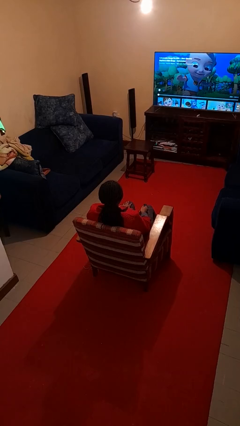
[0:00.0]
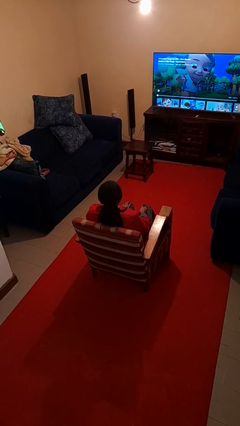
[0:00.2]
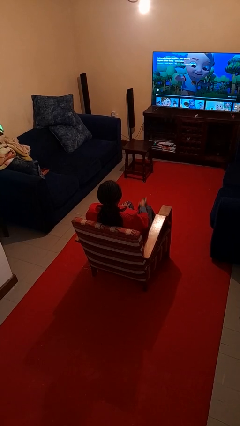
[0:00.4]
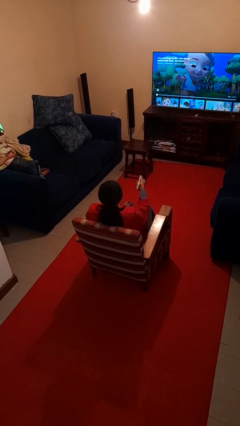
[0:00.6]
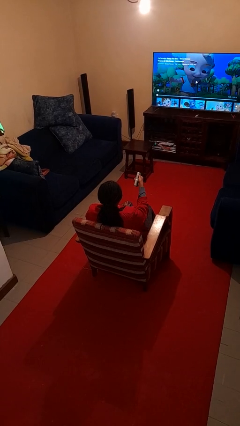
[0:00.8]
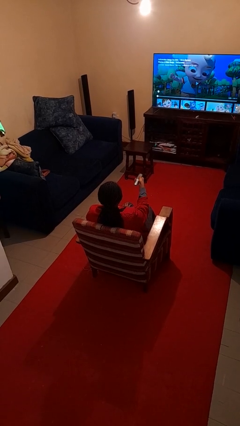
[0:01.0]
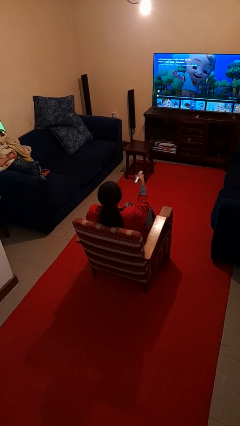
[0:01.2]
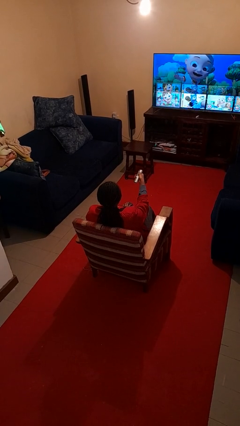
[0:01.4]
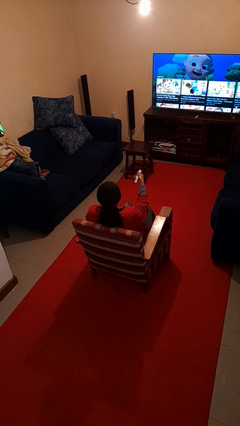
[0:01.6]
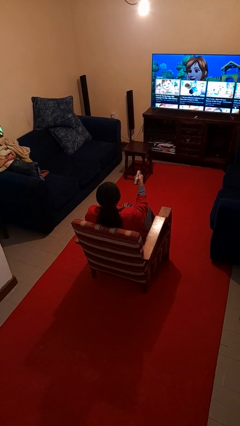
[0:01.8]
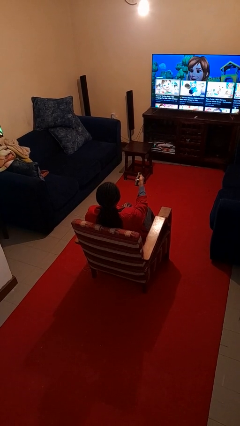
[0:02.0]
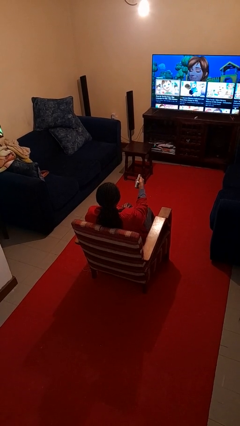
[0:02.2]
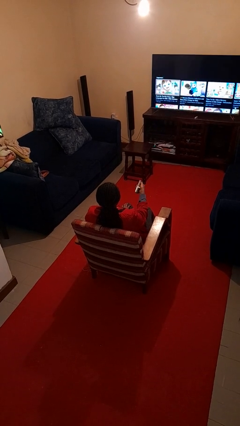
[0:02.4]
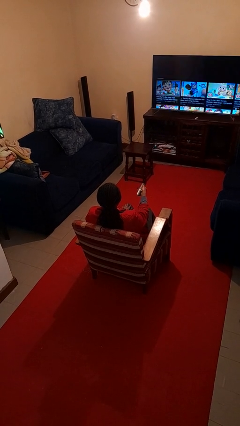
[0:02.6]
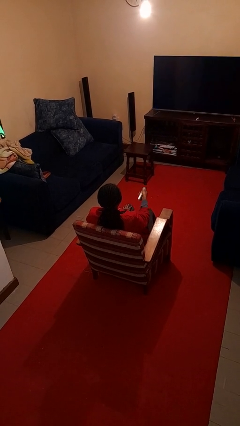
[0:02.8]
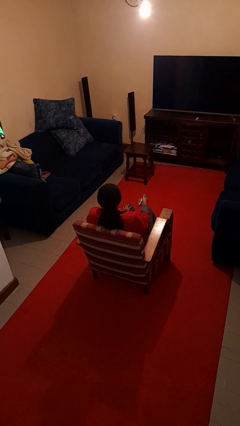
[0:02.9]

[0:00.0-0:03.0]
person uses television remote

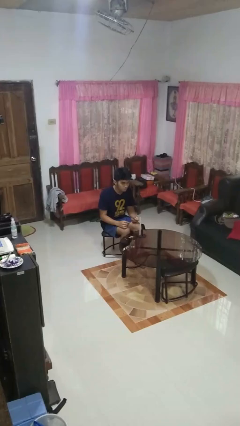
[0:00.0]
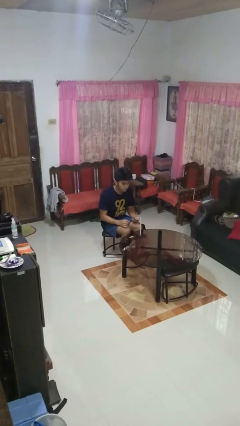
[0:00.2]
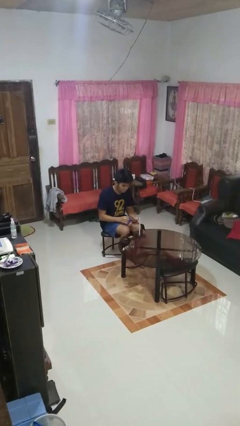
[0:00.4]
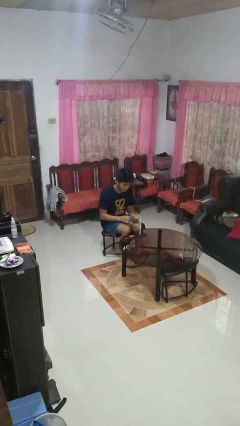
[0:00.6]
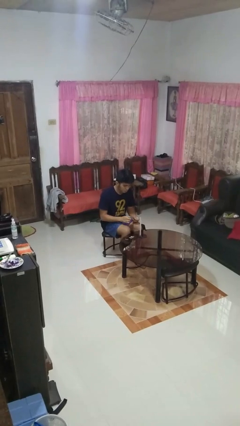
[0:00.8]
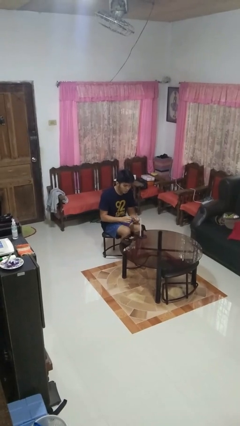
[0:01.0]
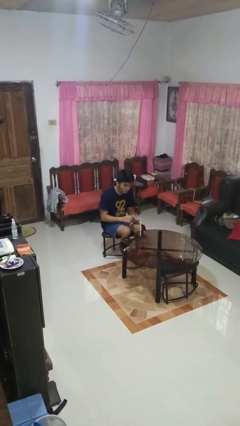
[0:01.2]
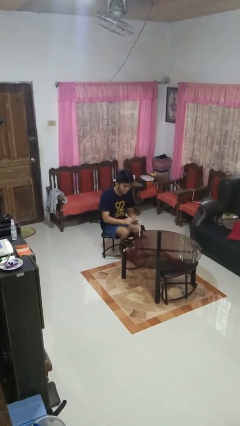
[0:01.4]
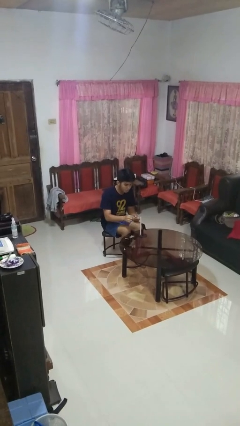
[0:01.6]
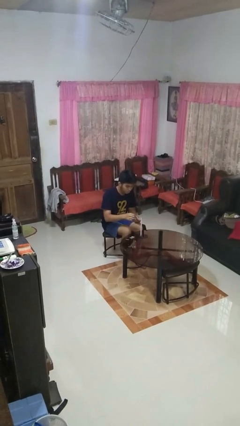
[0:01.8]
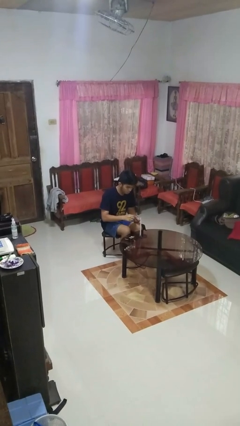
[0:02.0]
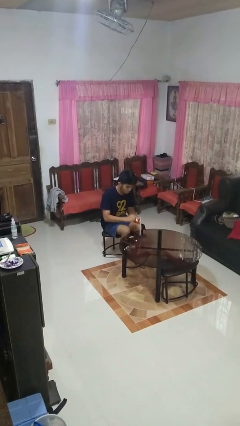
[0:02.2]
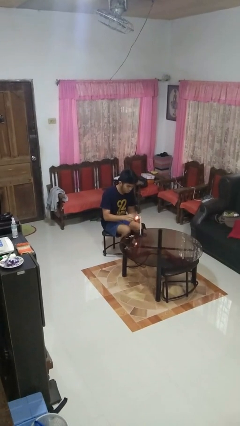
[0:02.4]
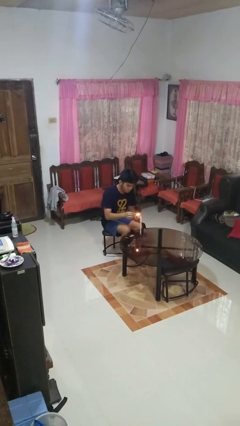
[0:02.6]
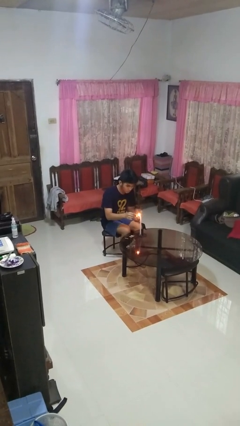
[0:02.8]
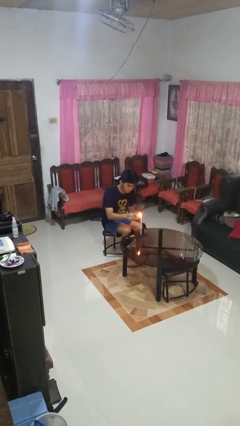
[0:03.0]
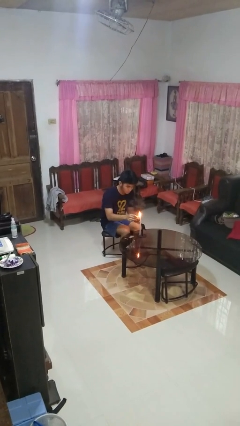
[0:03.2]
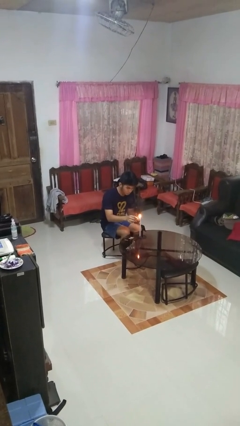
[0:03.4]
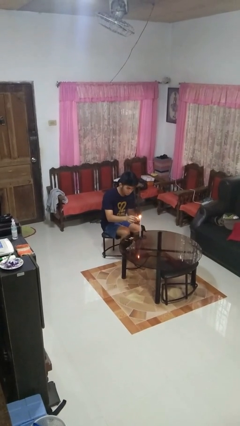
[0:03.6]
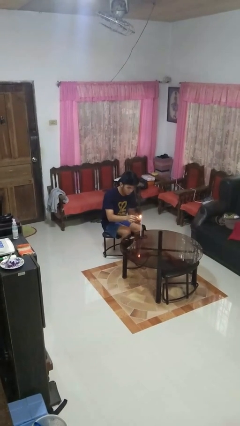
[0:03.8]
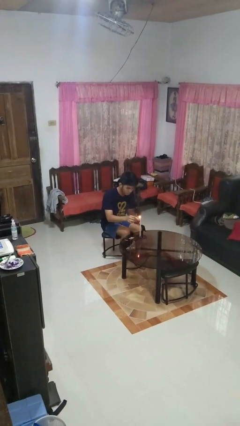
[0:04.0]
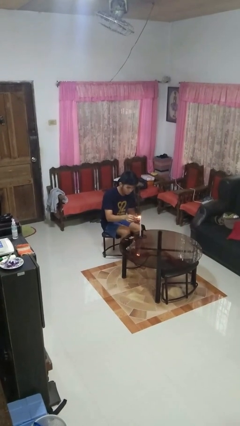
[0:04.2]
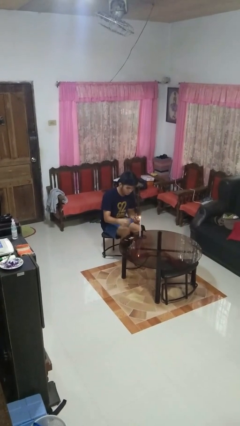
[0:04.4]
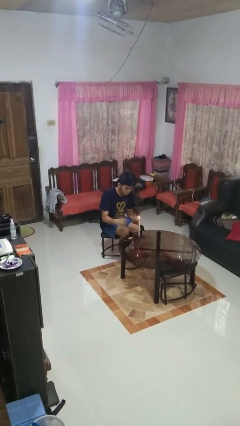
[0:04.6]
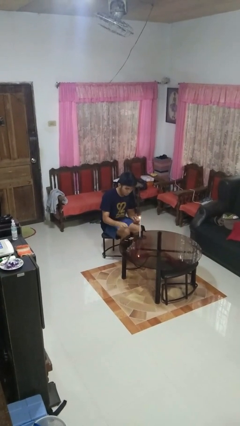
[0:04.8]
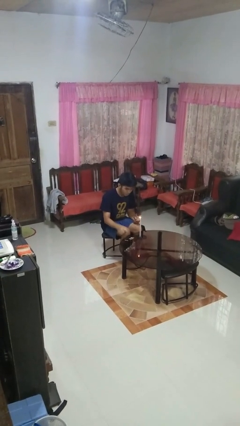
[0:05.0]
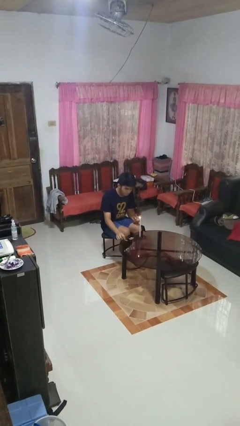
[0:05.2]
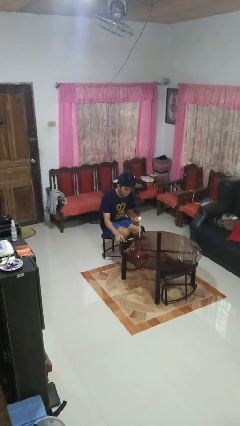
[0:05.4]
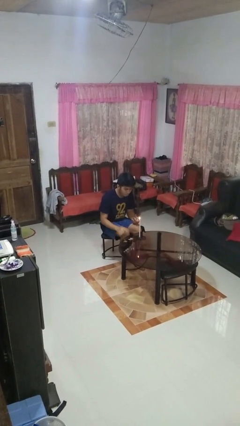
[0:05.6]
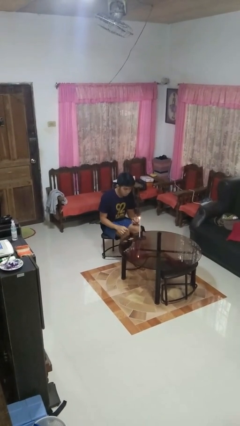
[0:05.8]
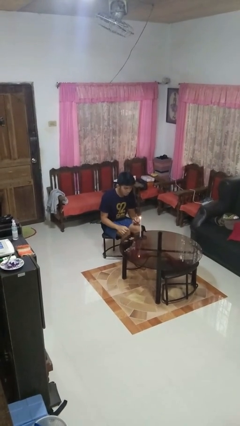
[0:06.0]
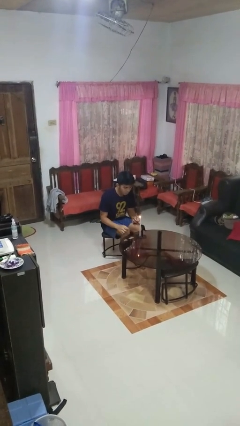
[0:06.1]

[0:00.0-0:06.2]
person lights candle

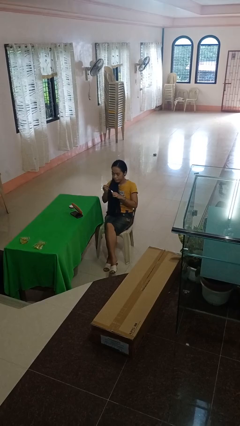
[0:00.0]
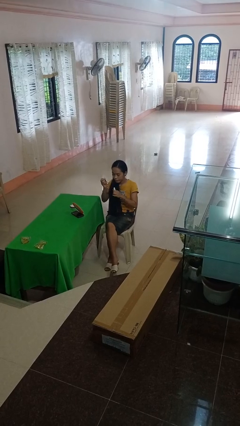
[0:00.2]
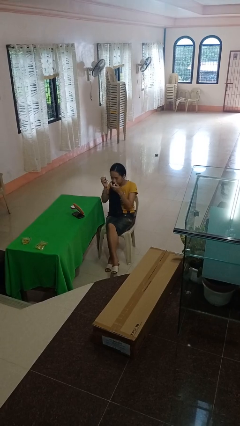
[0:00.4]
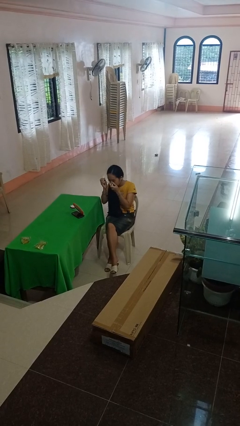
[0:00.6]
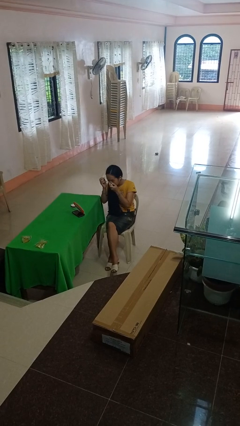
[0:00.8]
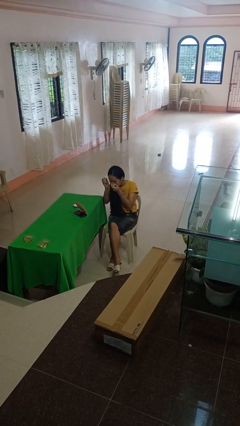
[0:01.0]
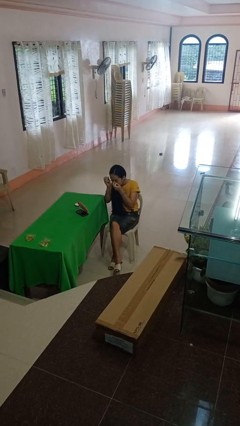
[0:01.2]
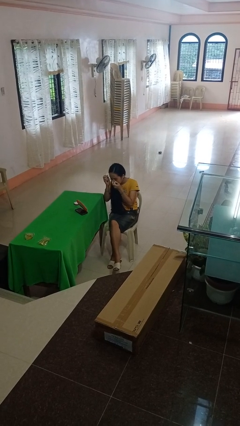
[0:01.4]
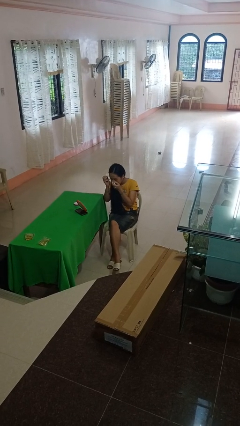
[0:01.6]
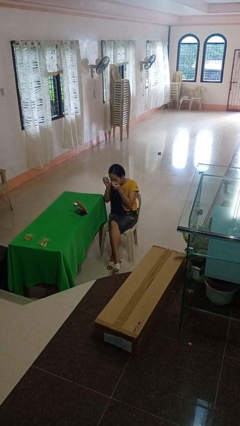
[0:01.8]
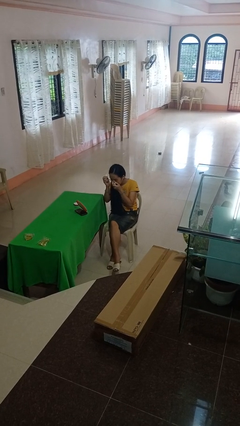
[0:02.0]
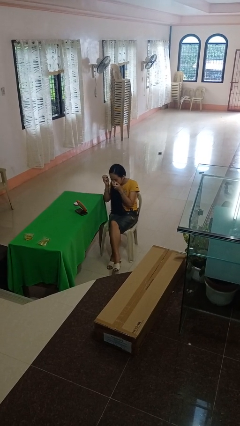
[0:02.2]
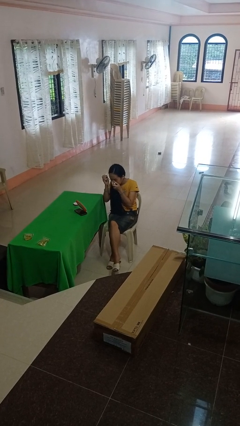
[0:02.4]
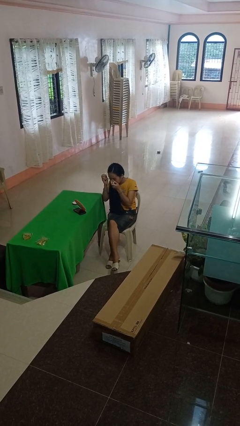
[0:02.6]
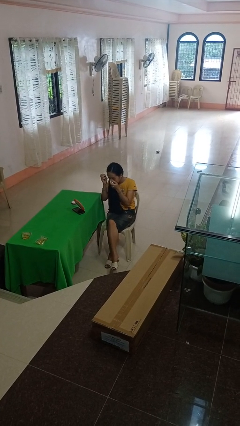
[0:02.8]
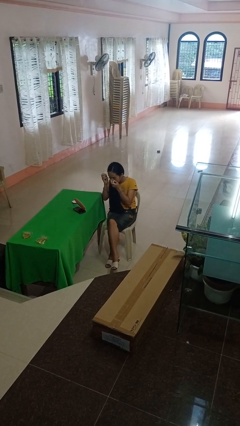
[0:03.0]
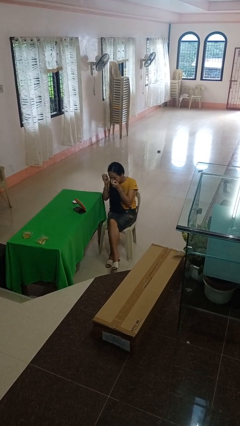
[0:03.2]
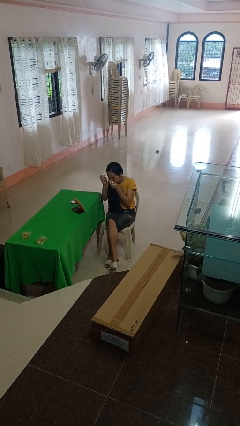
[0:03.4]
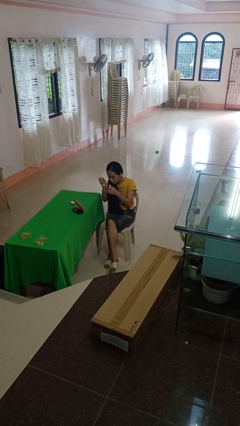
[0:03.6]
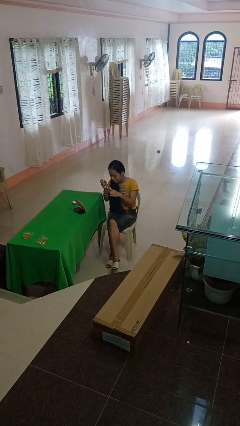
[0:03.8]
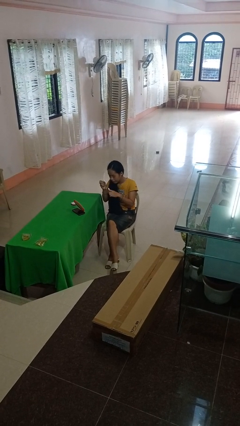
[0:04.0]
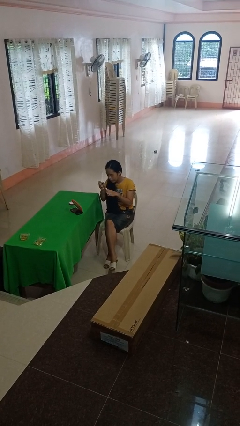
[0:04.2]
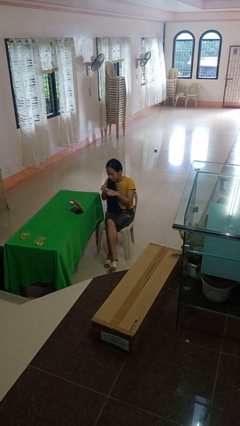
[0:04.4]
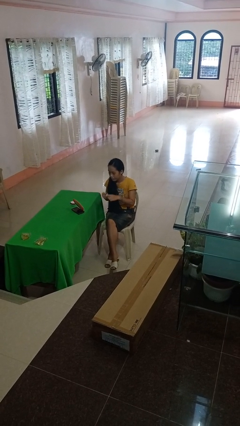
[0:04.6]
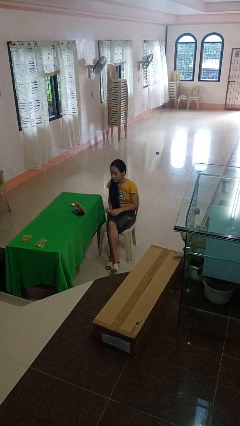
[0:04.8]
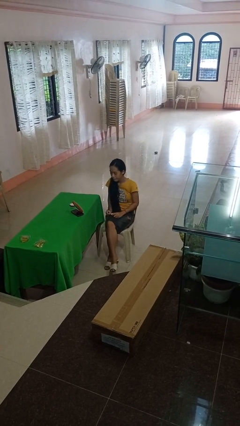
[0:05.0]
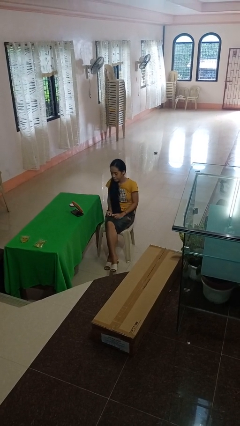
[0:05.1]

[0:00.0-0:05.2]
person applies eye makeup

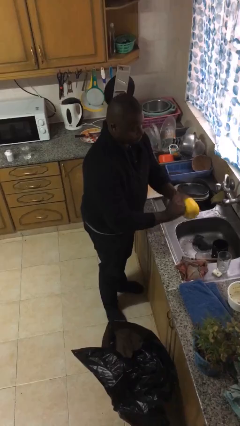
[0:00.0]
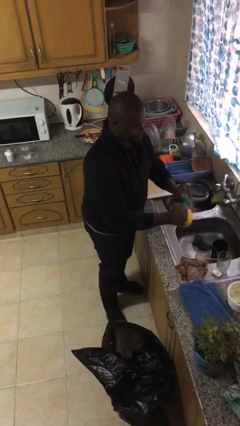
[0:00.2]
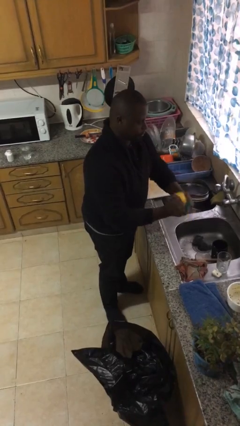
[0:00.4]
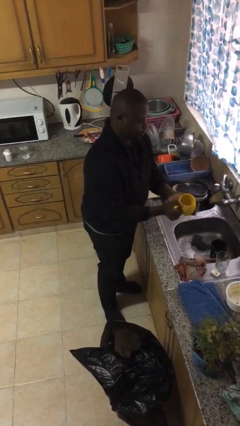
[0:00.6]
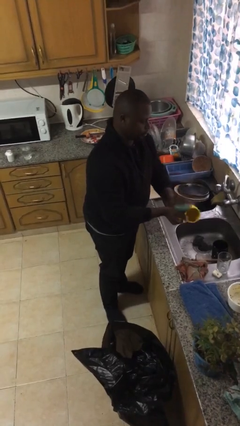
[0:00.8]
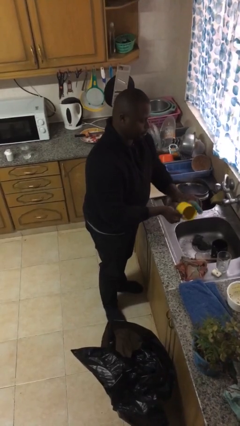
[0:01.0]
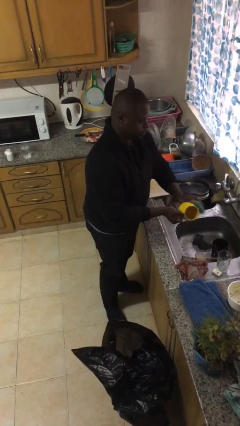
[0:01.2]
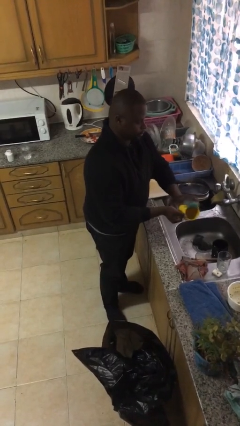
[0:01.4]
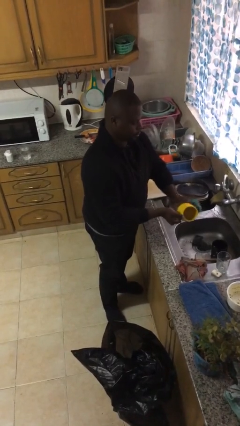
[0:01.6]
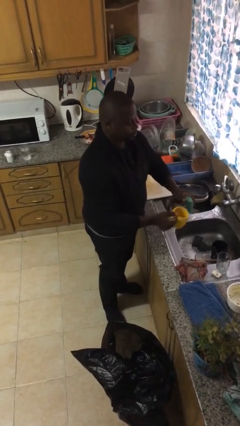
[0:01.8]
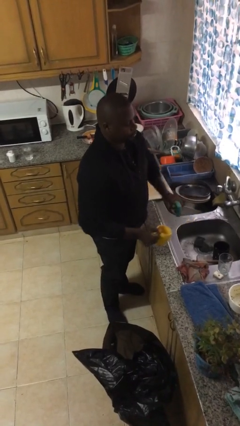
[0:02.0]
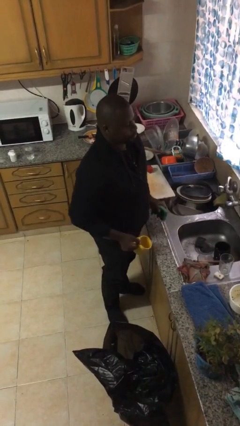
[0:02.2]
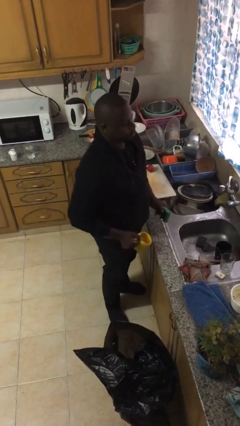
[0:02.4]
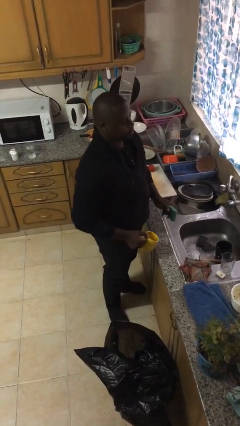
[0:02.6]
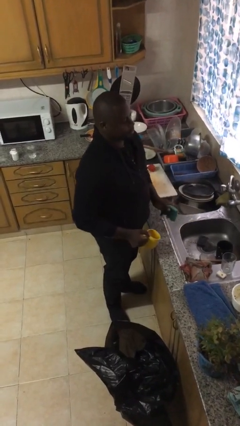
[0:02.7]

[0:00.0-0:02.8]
person washes dish

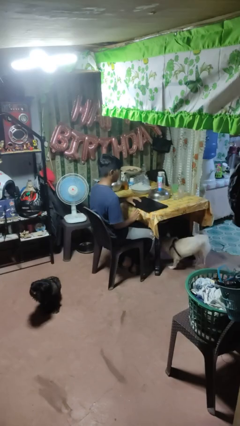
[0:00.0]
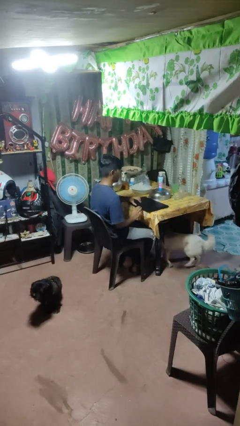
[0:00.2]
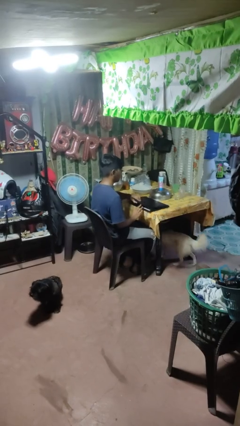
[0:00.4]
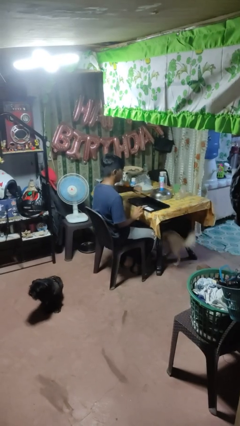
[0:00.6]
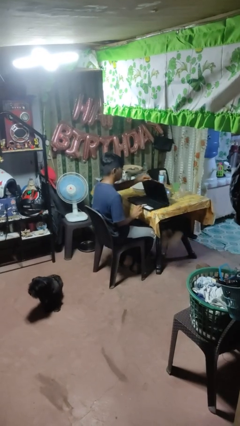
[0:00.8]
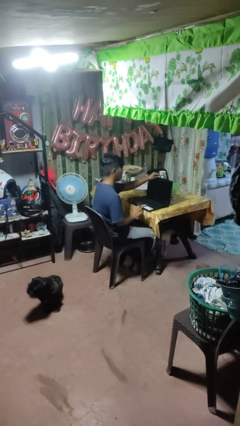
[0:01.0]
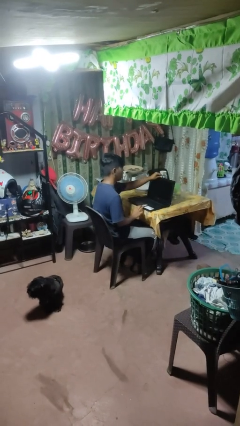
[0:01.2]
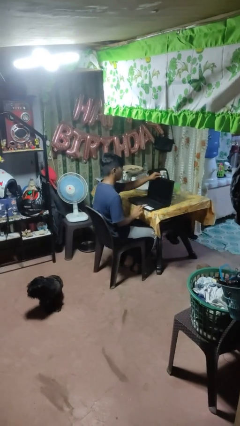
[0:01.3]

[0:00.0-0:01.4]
person opens laptop
